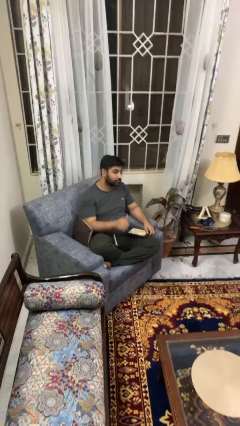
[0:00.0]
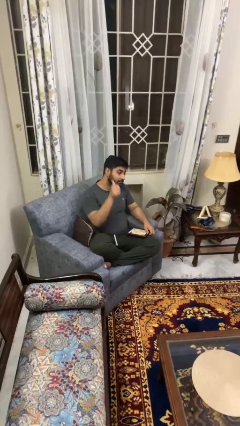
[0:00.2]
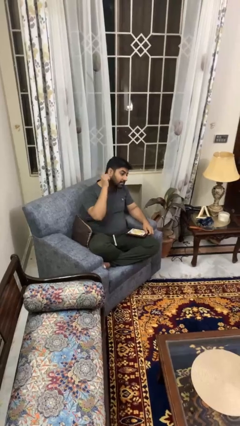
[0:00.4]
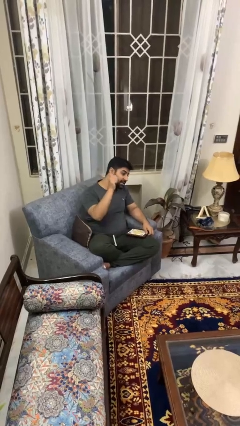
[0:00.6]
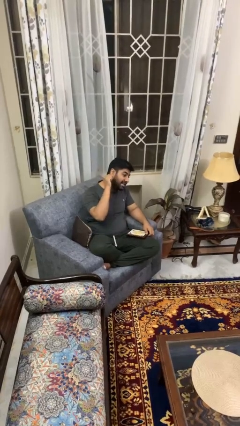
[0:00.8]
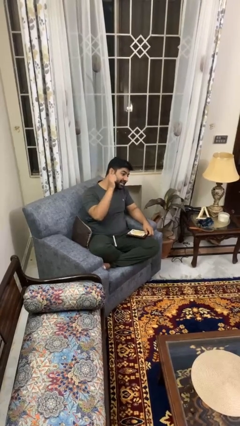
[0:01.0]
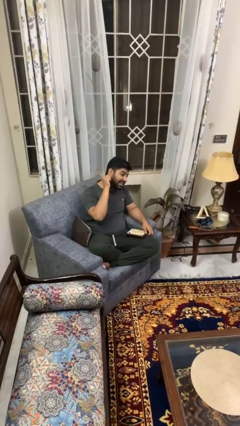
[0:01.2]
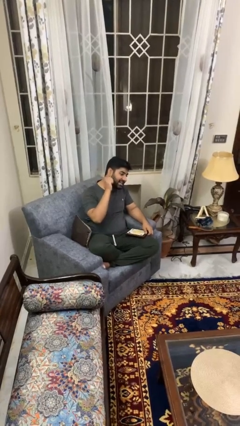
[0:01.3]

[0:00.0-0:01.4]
person gestures behind me

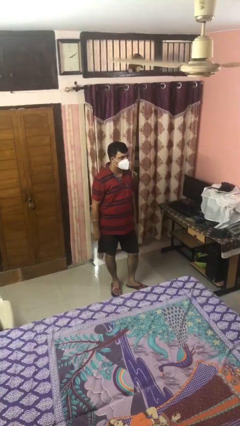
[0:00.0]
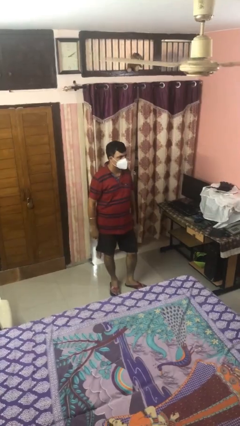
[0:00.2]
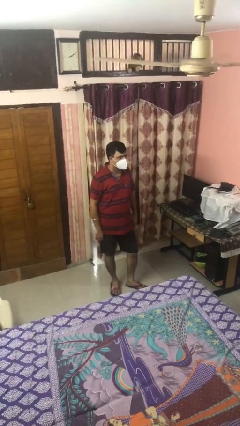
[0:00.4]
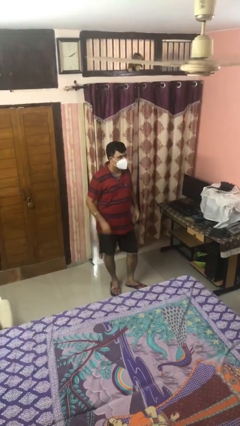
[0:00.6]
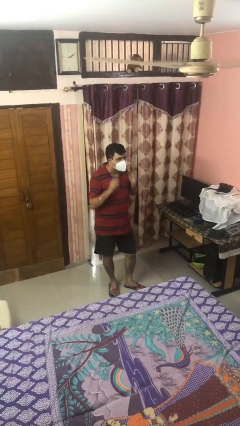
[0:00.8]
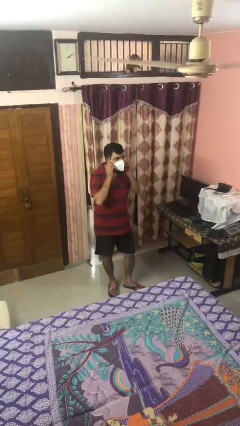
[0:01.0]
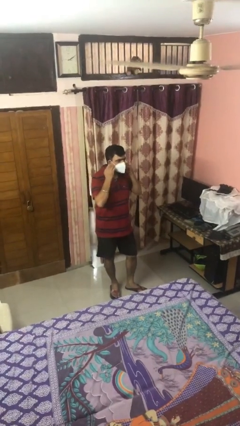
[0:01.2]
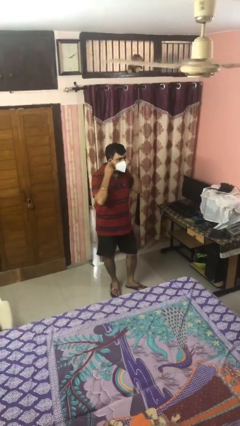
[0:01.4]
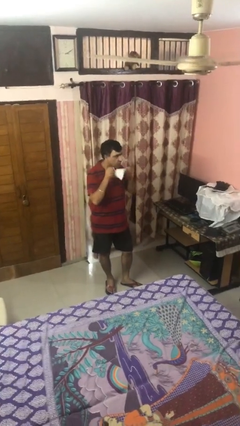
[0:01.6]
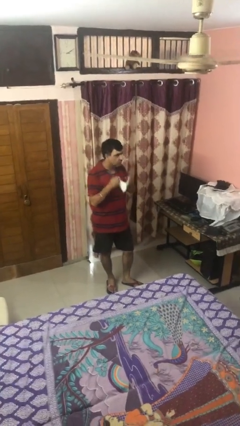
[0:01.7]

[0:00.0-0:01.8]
person takes off facemask

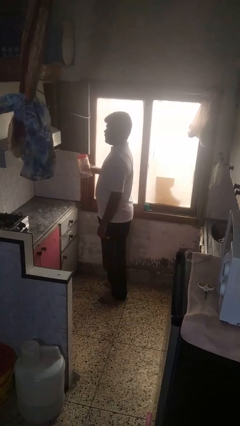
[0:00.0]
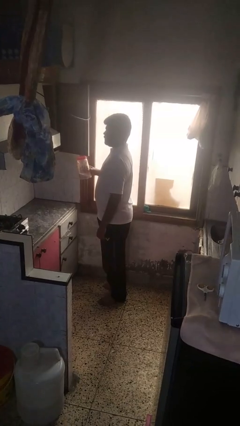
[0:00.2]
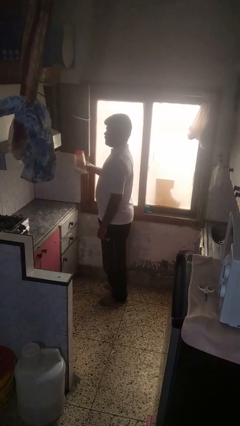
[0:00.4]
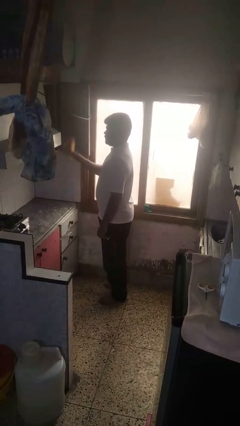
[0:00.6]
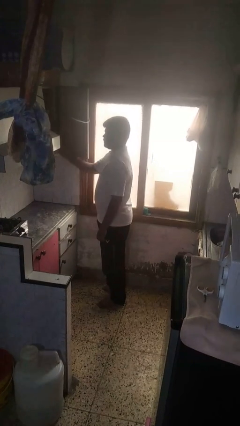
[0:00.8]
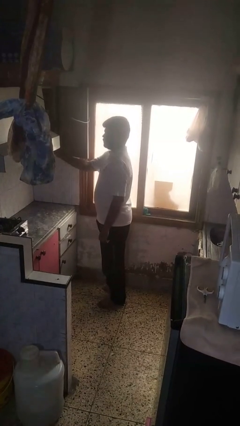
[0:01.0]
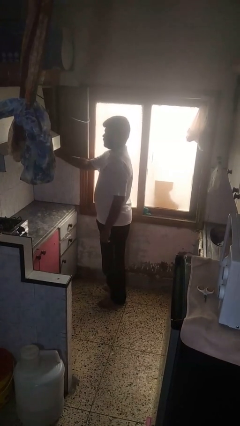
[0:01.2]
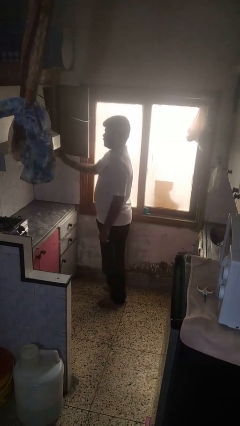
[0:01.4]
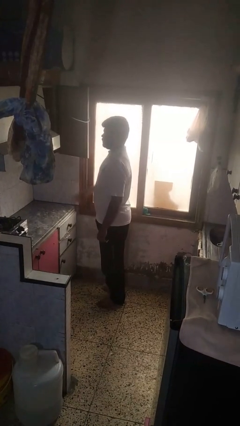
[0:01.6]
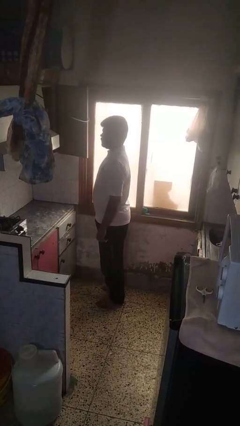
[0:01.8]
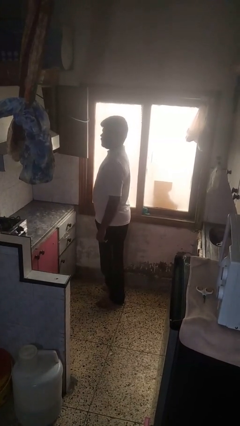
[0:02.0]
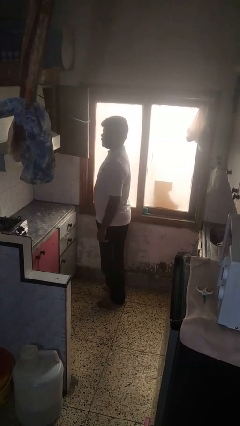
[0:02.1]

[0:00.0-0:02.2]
person puts down object into cabinet

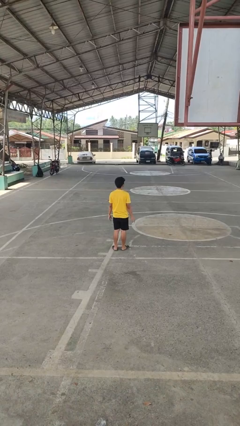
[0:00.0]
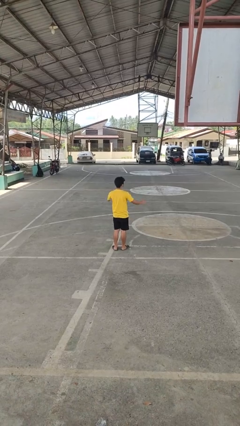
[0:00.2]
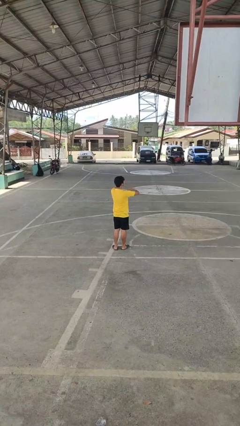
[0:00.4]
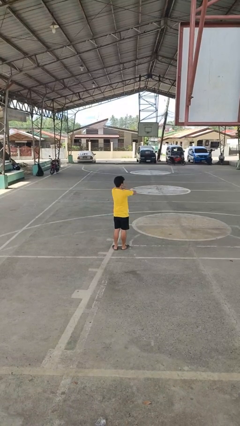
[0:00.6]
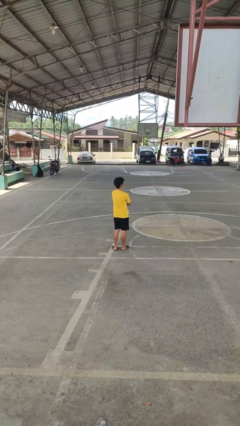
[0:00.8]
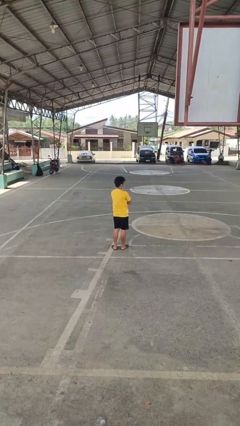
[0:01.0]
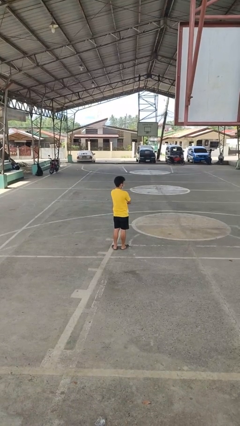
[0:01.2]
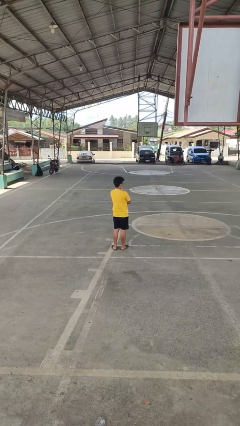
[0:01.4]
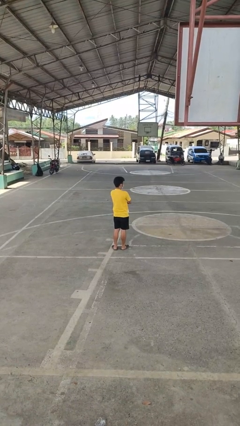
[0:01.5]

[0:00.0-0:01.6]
person crosses arms

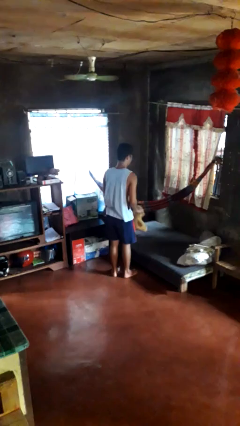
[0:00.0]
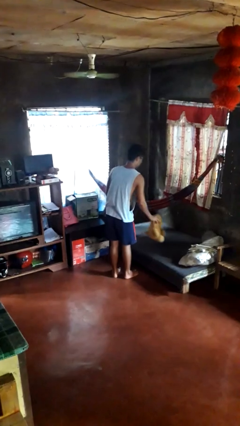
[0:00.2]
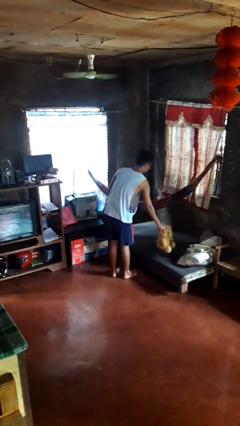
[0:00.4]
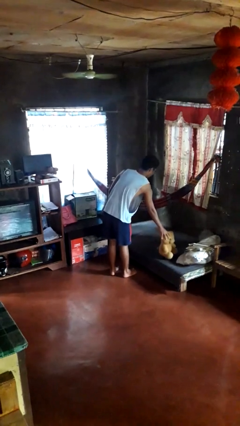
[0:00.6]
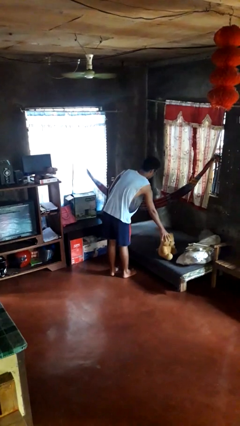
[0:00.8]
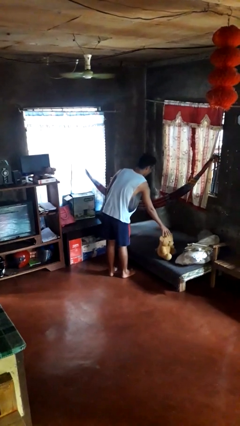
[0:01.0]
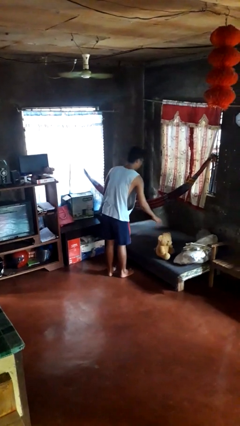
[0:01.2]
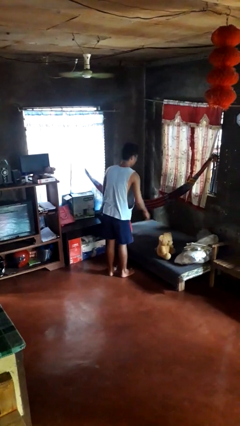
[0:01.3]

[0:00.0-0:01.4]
person puts down object on bed

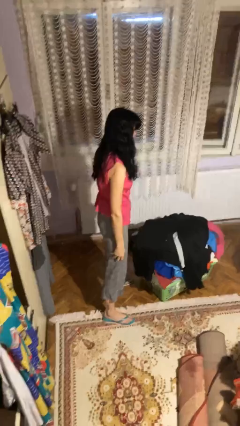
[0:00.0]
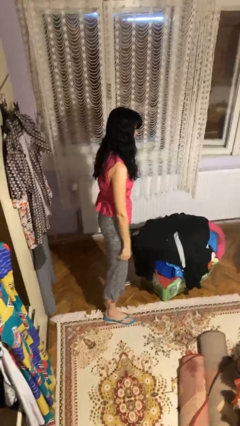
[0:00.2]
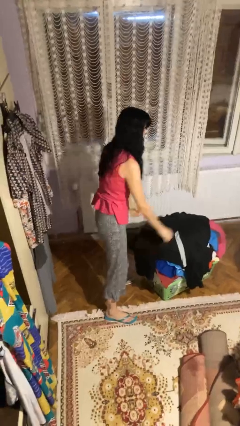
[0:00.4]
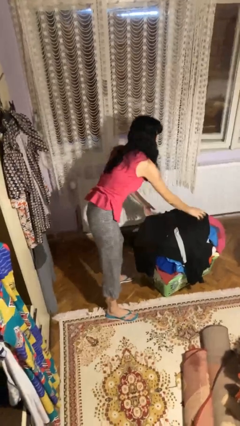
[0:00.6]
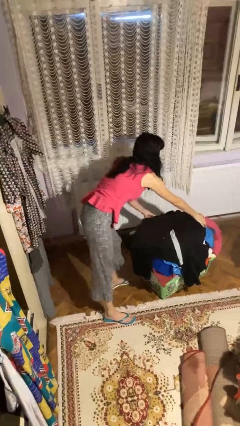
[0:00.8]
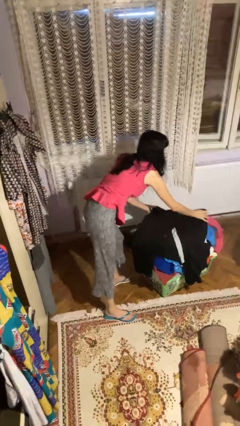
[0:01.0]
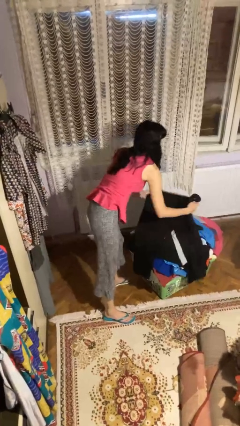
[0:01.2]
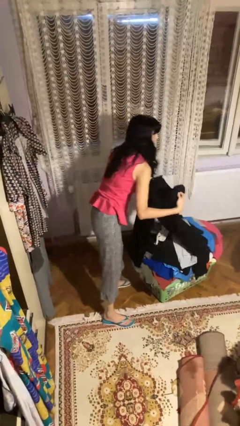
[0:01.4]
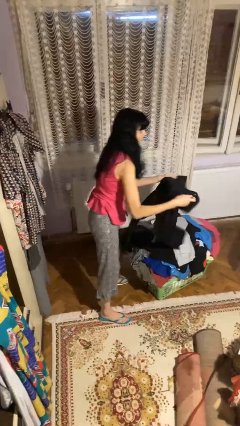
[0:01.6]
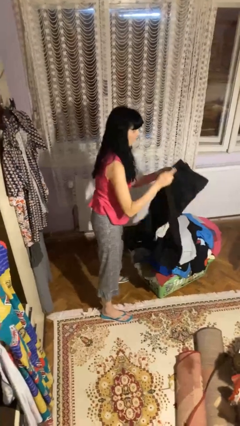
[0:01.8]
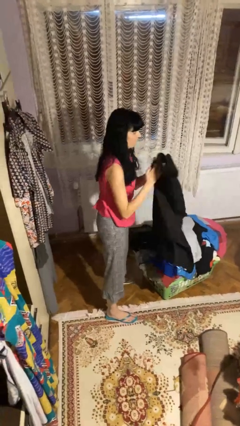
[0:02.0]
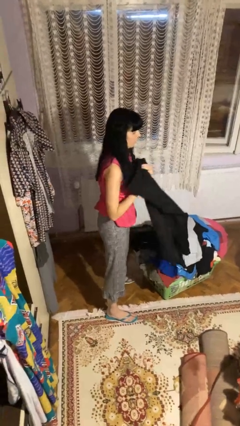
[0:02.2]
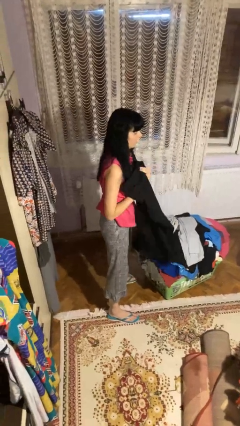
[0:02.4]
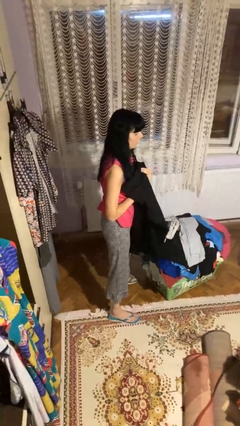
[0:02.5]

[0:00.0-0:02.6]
person folds pants

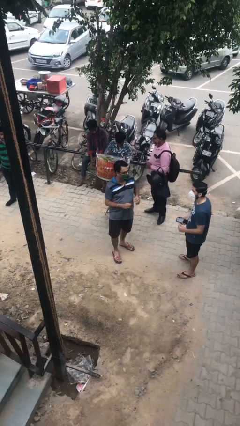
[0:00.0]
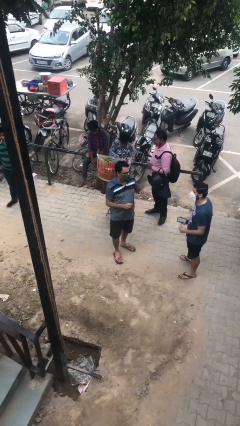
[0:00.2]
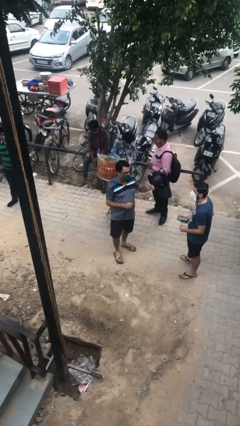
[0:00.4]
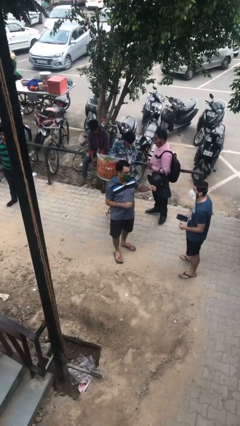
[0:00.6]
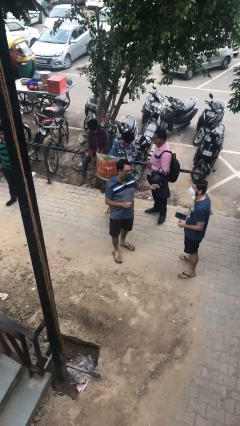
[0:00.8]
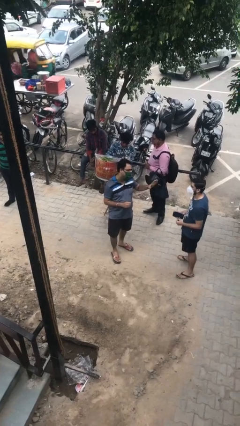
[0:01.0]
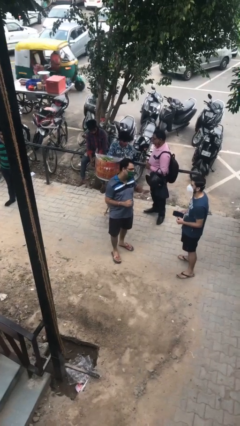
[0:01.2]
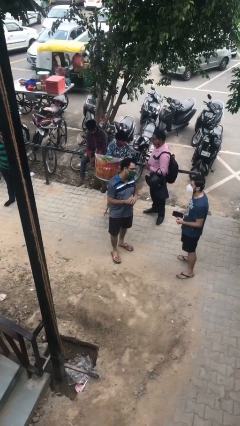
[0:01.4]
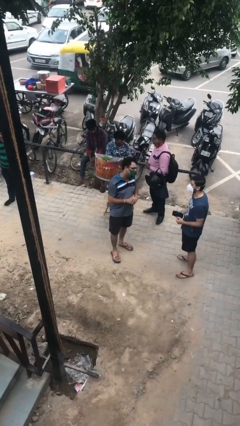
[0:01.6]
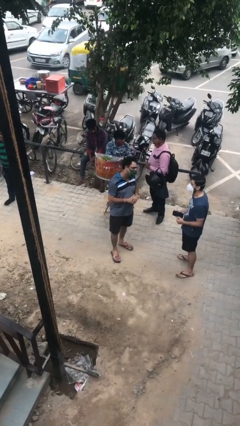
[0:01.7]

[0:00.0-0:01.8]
person talks to person

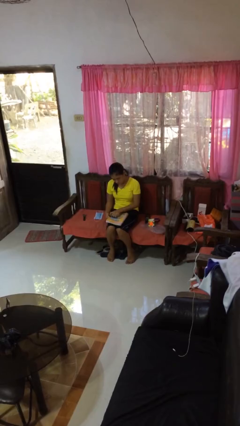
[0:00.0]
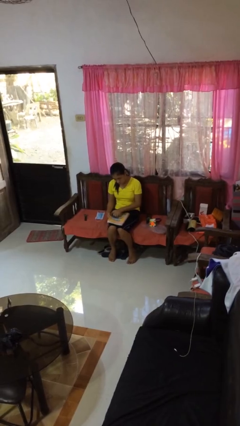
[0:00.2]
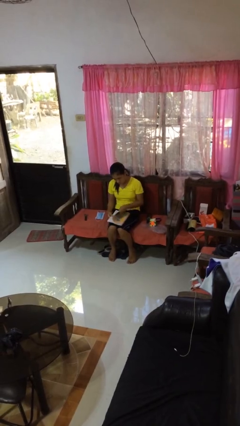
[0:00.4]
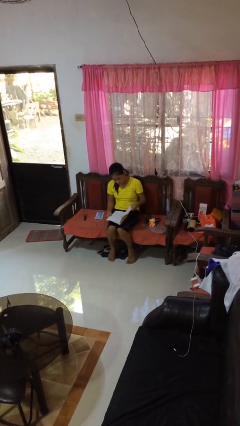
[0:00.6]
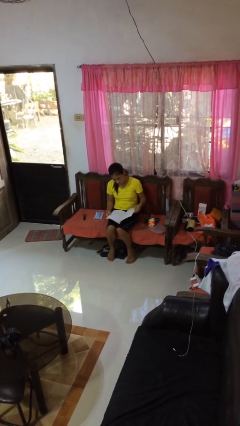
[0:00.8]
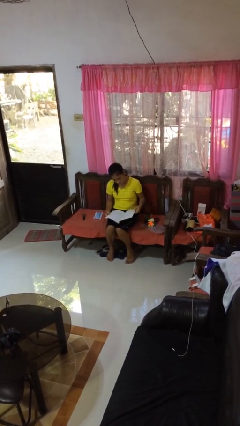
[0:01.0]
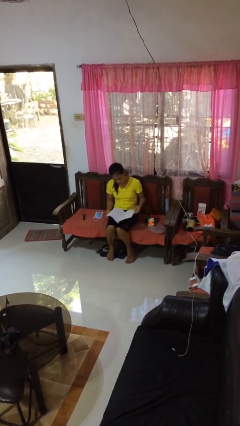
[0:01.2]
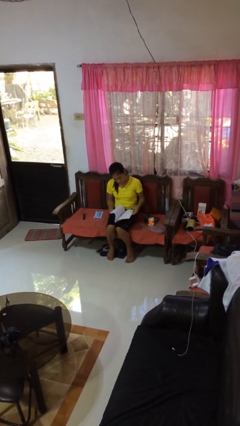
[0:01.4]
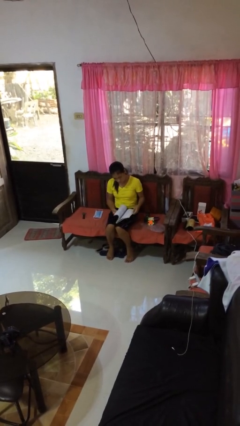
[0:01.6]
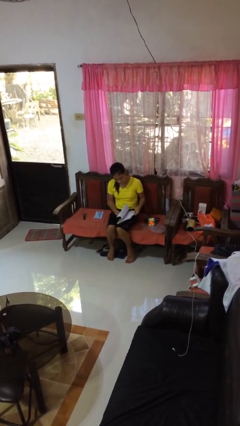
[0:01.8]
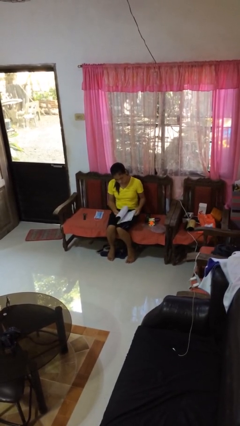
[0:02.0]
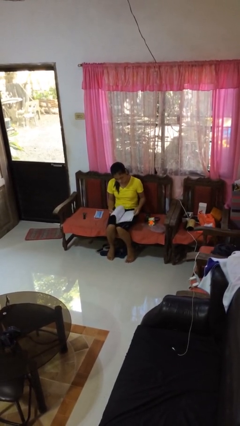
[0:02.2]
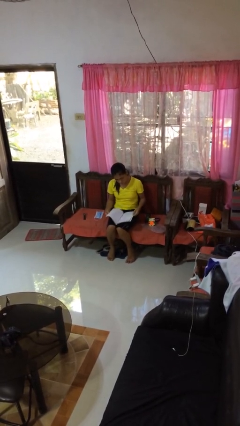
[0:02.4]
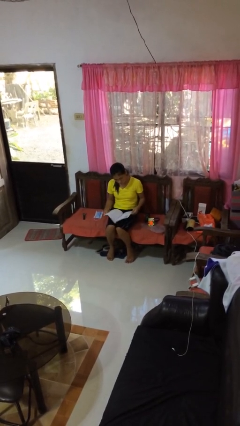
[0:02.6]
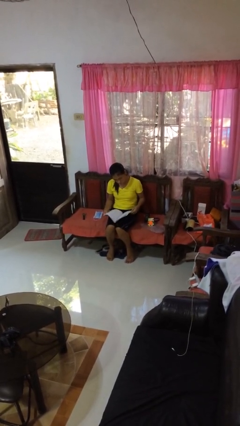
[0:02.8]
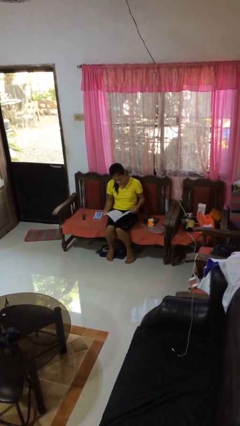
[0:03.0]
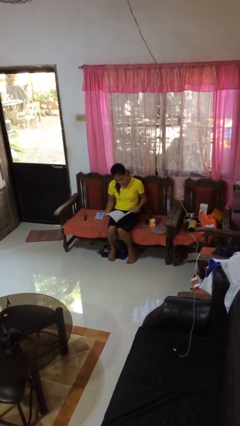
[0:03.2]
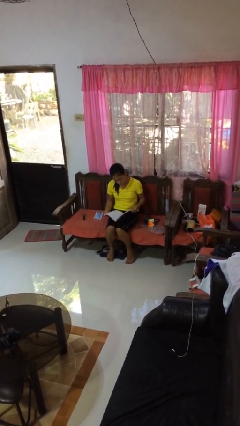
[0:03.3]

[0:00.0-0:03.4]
person reads book

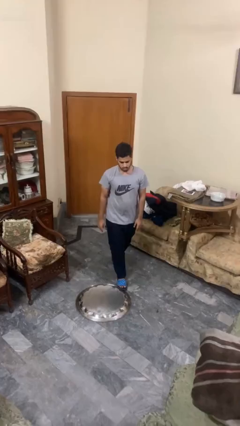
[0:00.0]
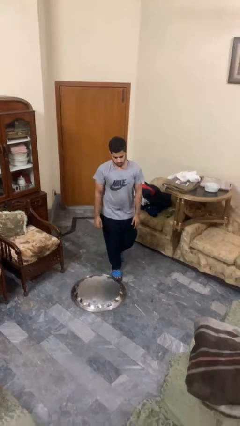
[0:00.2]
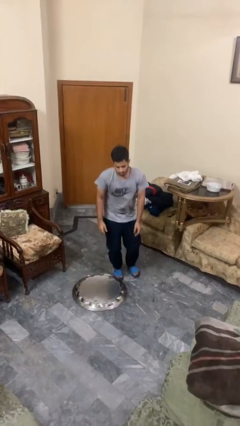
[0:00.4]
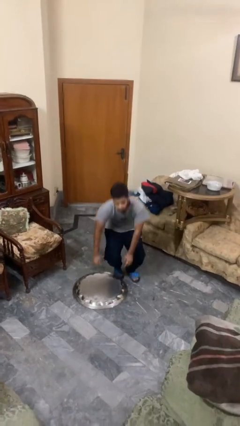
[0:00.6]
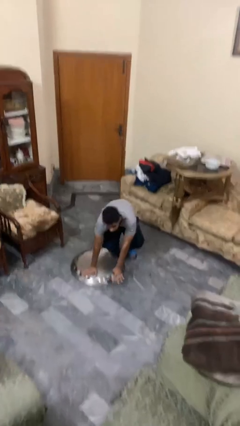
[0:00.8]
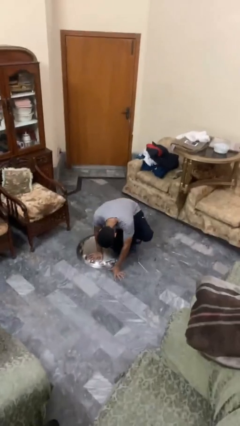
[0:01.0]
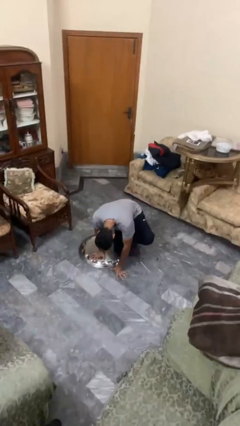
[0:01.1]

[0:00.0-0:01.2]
person trips on object on floor
